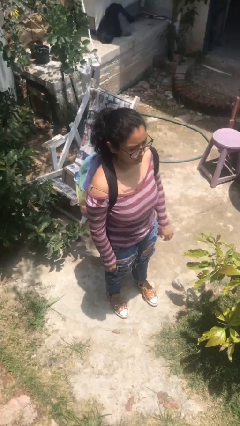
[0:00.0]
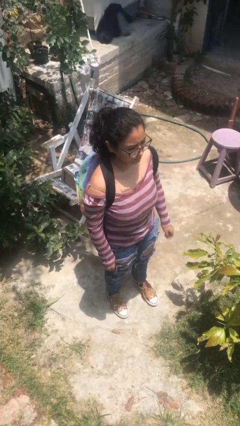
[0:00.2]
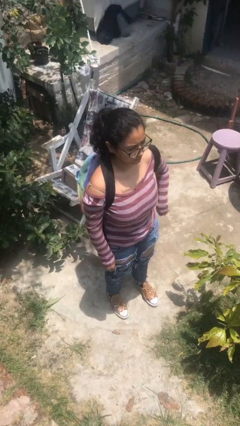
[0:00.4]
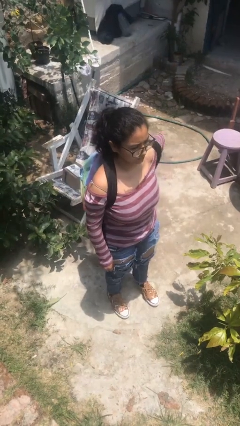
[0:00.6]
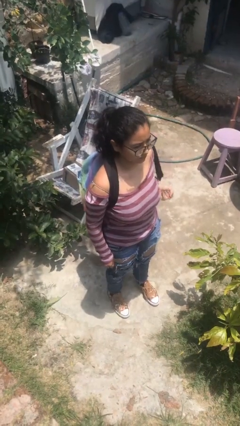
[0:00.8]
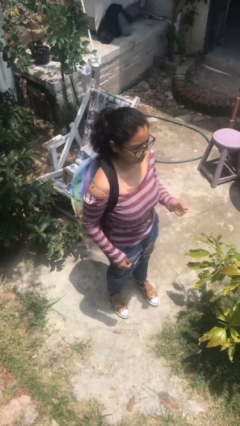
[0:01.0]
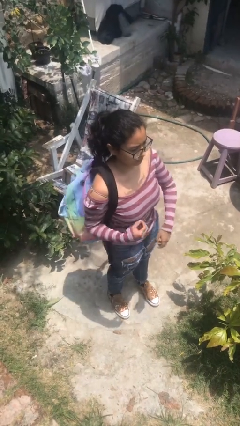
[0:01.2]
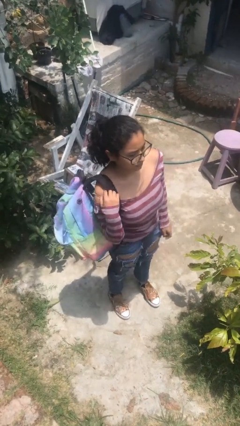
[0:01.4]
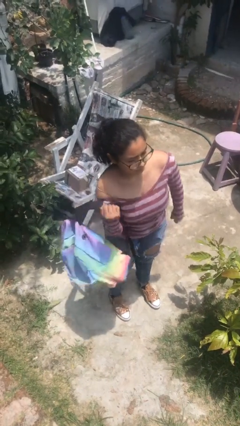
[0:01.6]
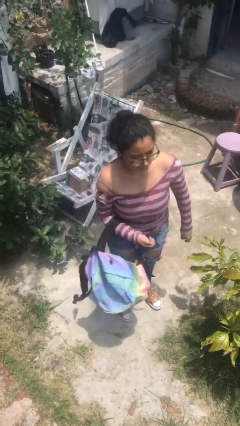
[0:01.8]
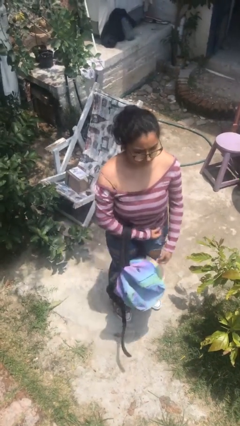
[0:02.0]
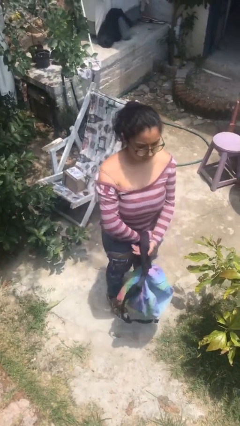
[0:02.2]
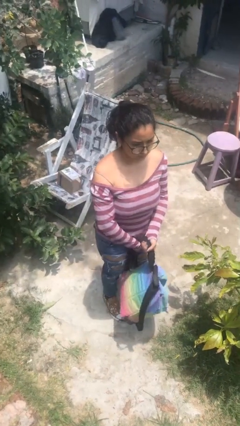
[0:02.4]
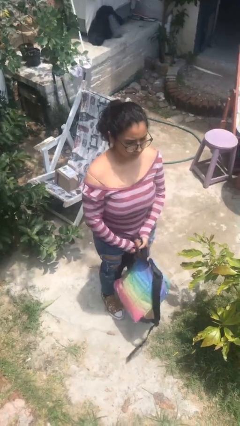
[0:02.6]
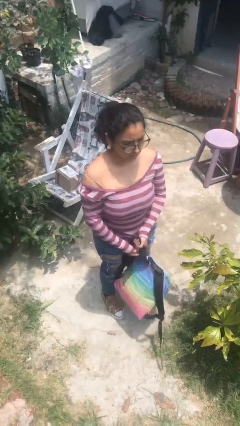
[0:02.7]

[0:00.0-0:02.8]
person takes off backpack

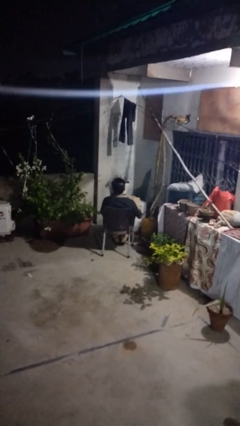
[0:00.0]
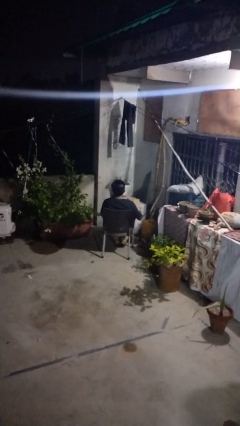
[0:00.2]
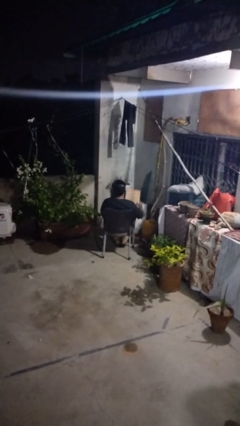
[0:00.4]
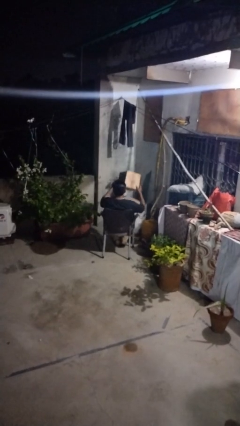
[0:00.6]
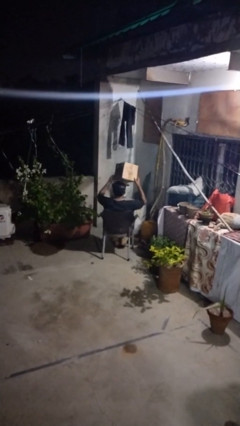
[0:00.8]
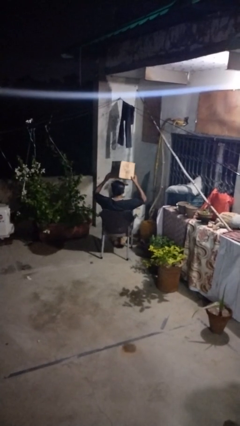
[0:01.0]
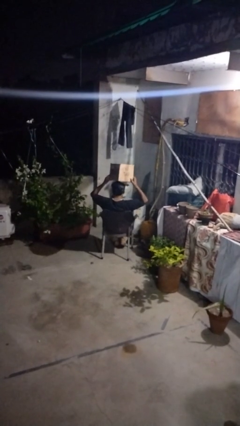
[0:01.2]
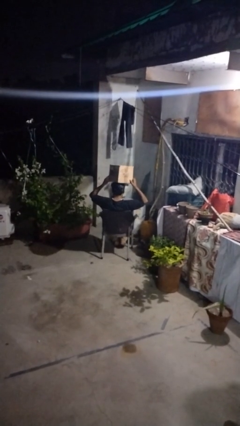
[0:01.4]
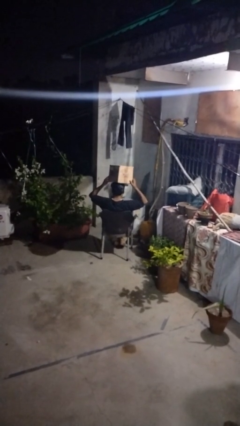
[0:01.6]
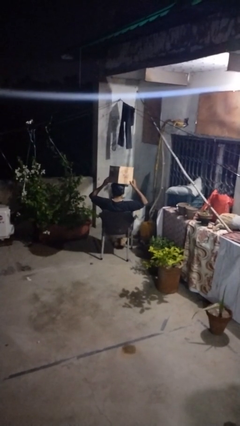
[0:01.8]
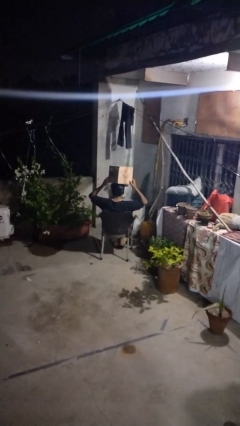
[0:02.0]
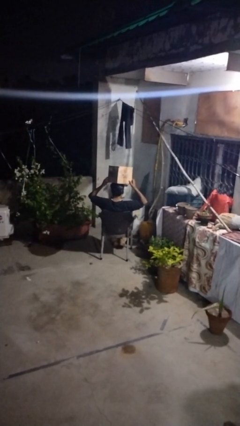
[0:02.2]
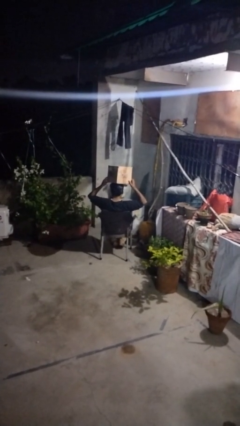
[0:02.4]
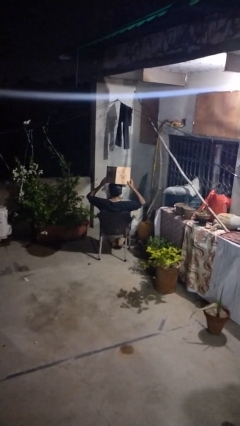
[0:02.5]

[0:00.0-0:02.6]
person holds object above head

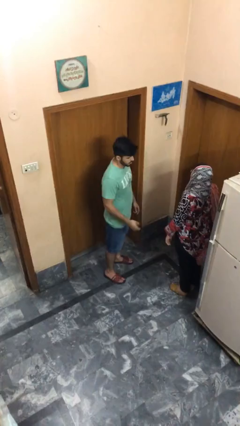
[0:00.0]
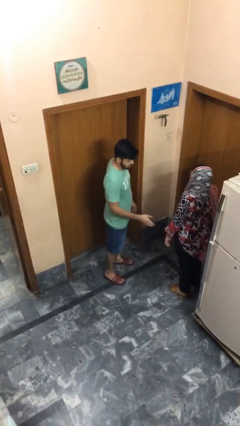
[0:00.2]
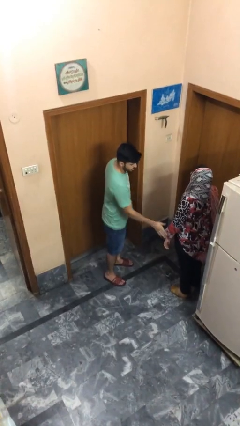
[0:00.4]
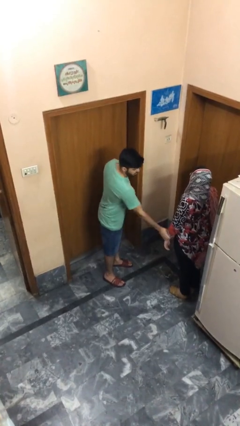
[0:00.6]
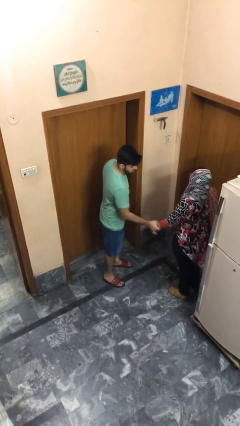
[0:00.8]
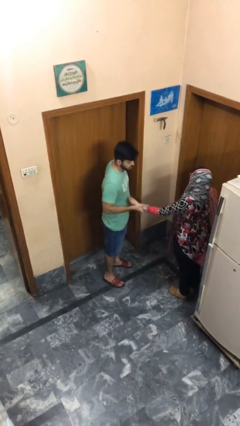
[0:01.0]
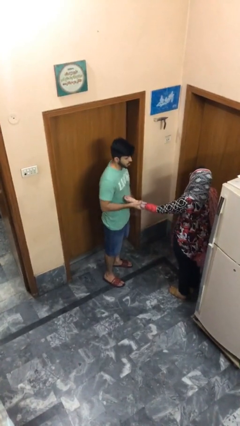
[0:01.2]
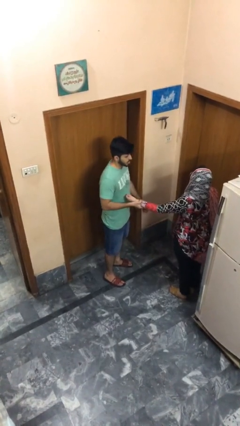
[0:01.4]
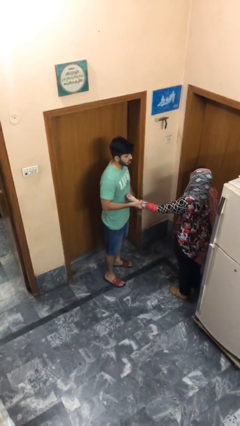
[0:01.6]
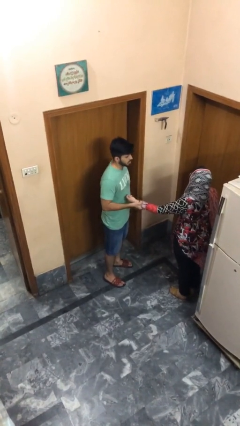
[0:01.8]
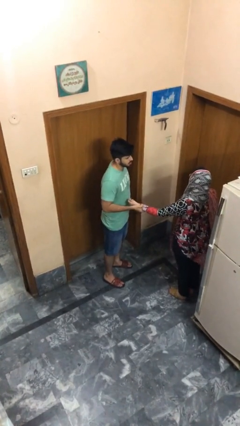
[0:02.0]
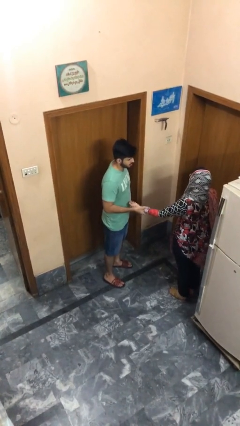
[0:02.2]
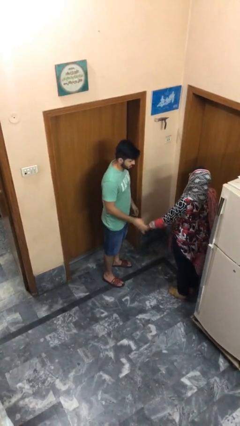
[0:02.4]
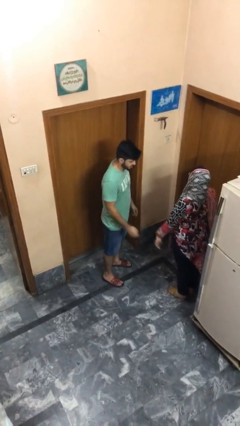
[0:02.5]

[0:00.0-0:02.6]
person grabs person by forearm

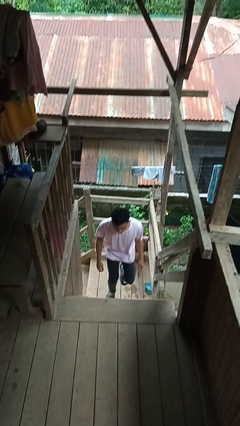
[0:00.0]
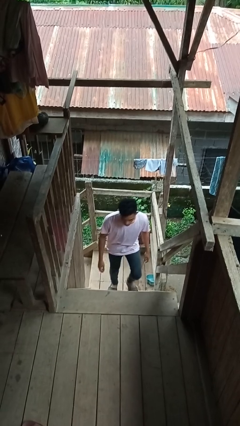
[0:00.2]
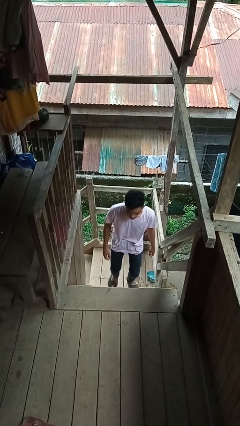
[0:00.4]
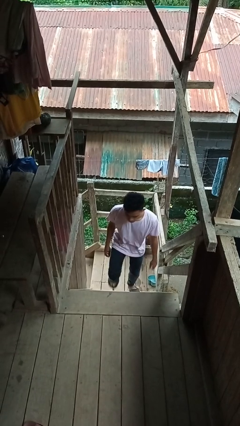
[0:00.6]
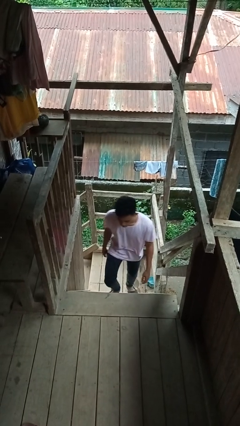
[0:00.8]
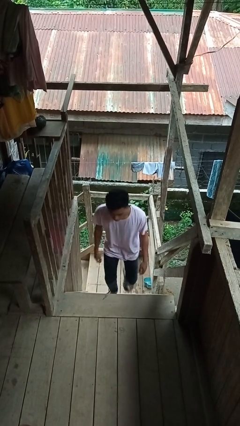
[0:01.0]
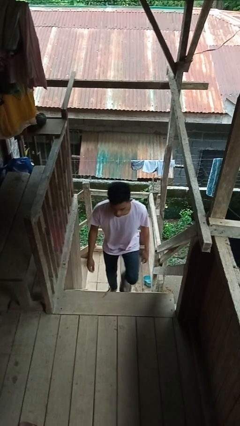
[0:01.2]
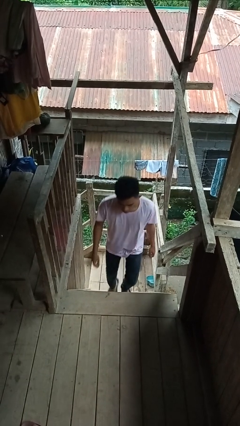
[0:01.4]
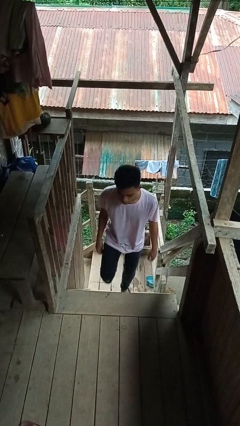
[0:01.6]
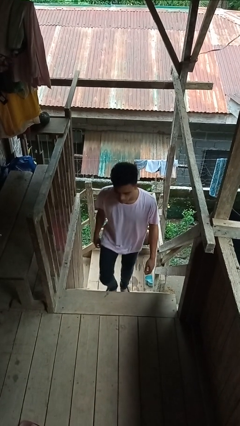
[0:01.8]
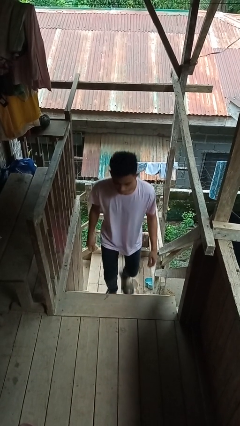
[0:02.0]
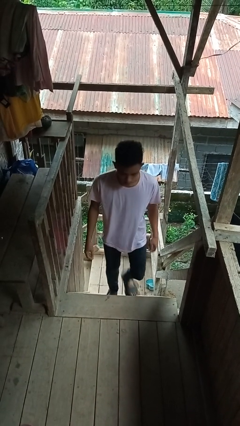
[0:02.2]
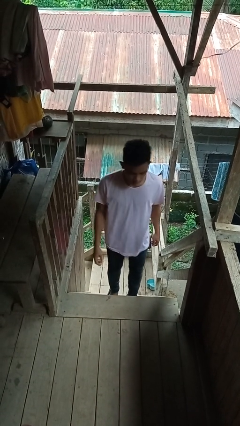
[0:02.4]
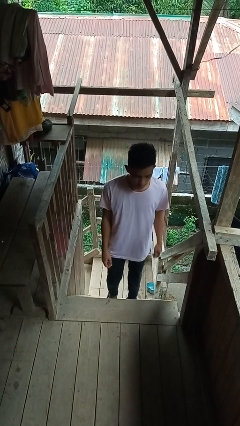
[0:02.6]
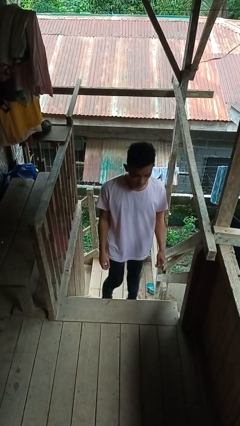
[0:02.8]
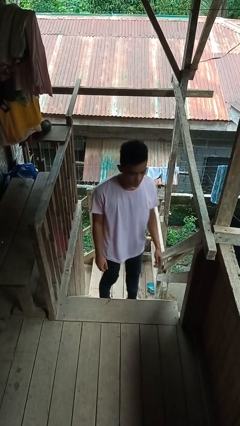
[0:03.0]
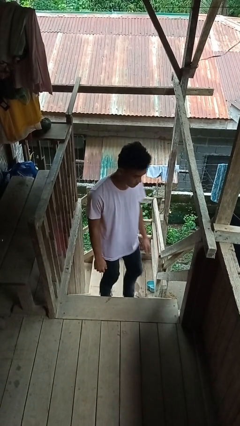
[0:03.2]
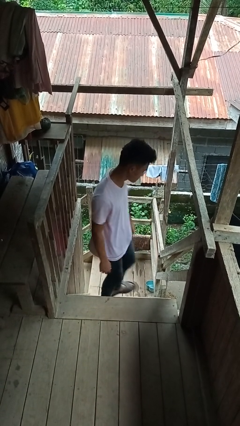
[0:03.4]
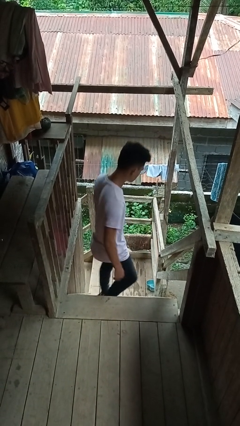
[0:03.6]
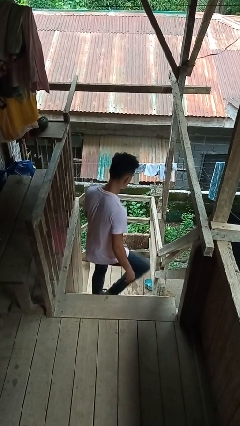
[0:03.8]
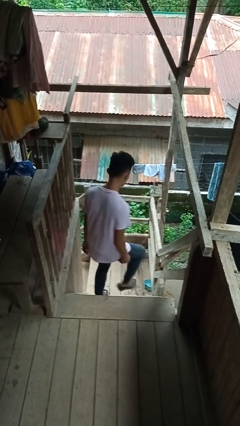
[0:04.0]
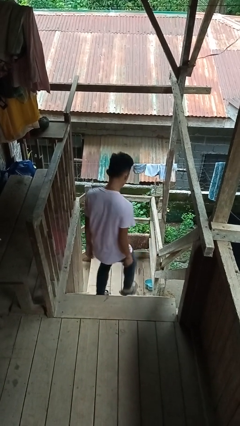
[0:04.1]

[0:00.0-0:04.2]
person climbs up stairs

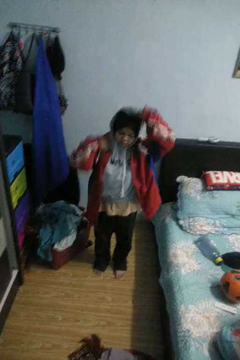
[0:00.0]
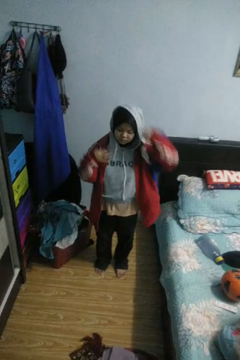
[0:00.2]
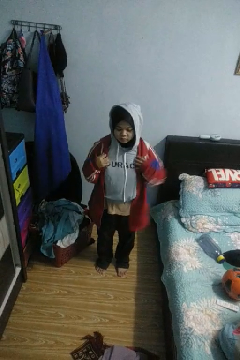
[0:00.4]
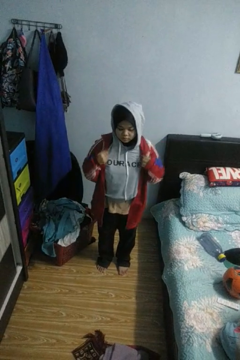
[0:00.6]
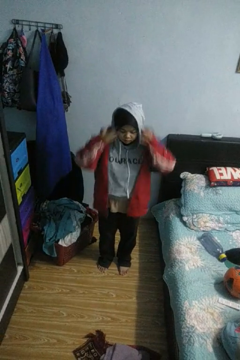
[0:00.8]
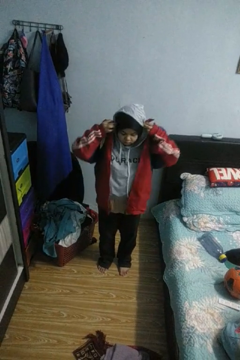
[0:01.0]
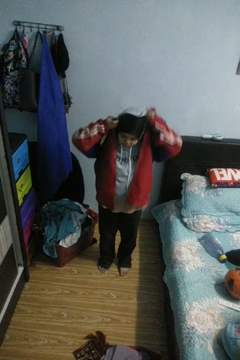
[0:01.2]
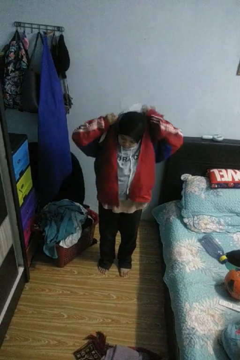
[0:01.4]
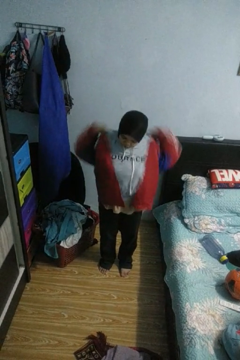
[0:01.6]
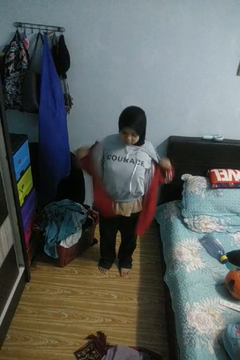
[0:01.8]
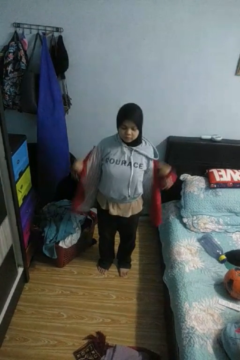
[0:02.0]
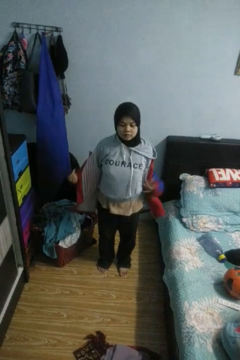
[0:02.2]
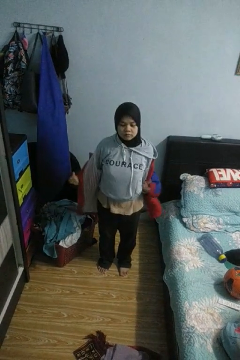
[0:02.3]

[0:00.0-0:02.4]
person takes off hoodie

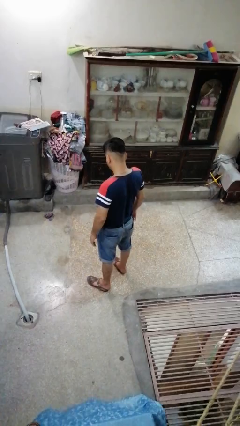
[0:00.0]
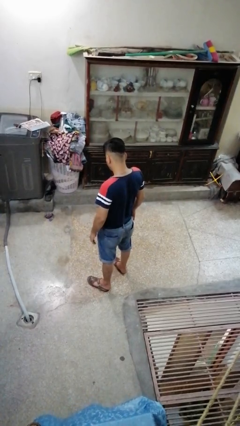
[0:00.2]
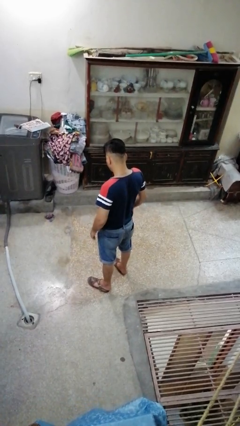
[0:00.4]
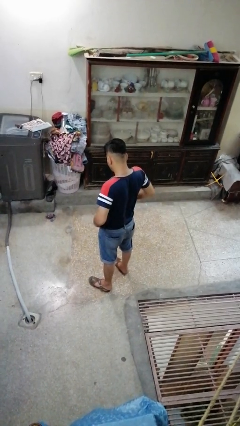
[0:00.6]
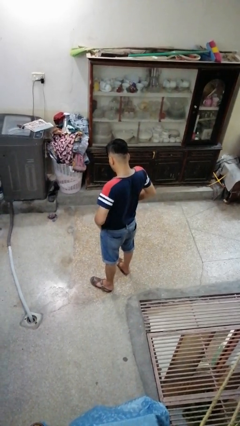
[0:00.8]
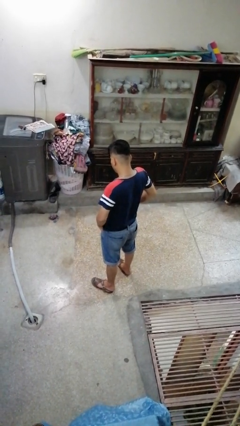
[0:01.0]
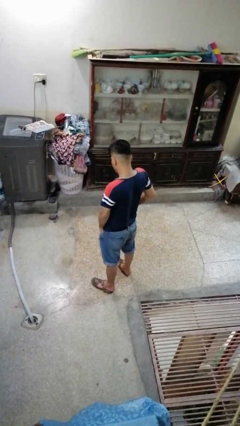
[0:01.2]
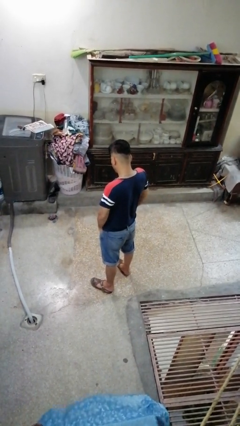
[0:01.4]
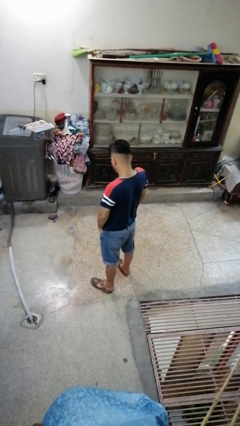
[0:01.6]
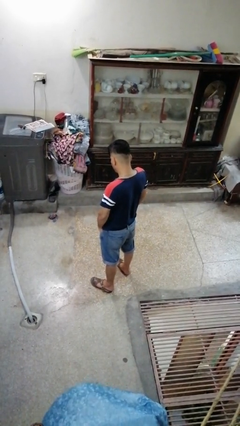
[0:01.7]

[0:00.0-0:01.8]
person puts hands in back pockets

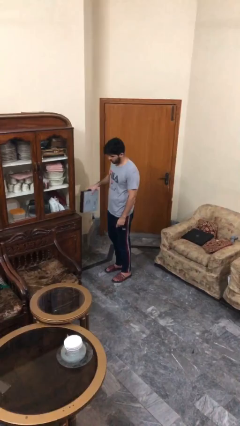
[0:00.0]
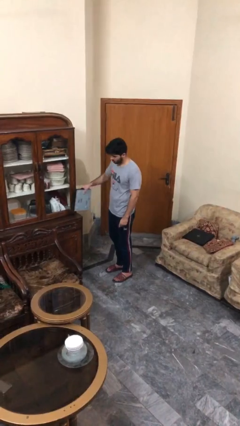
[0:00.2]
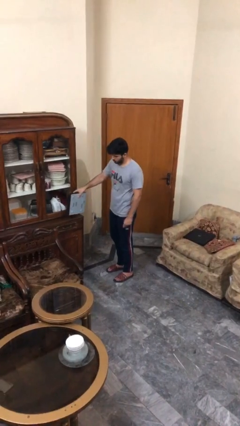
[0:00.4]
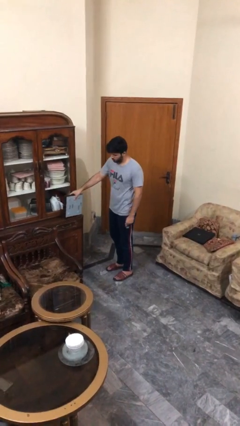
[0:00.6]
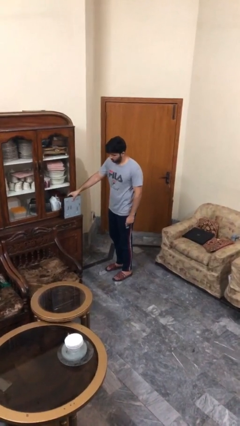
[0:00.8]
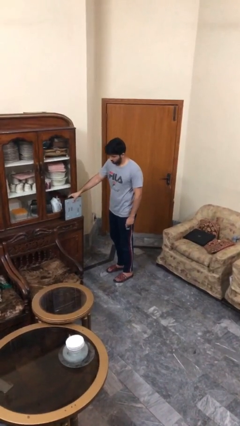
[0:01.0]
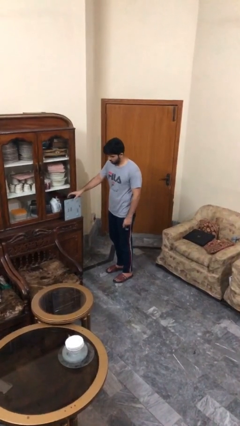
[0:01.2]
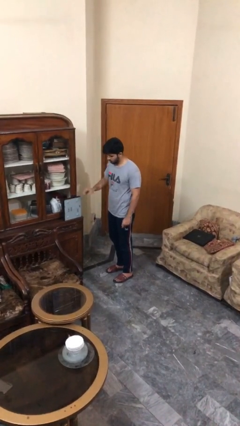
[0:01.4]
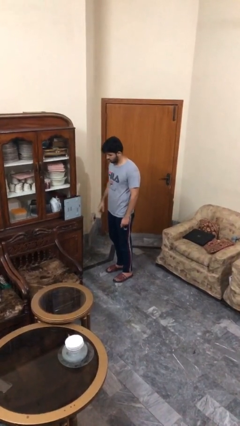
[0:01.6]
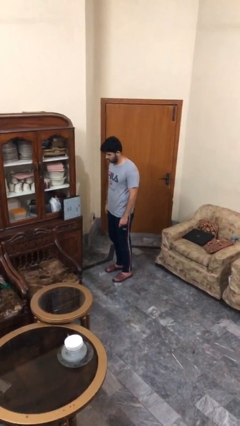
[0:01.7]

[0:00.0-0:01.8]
person puts down object on countertop
